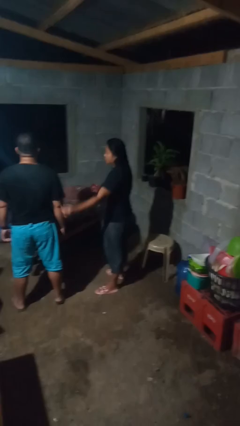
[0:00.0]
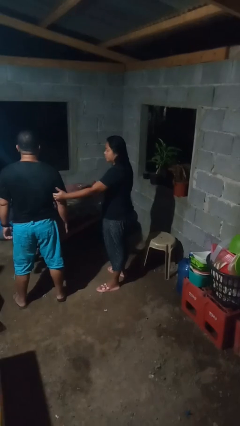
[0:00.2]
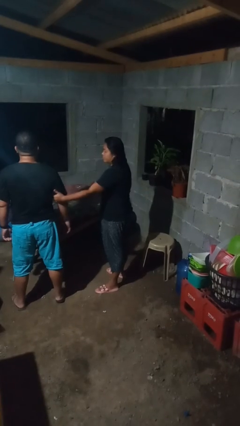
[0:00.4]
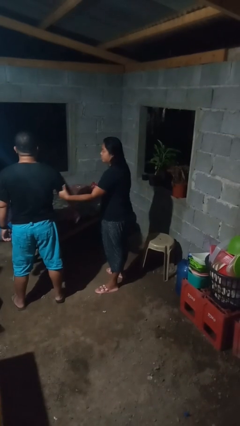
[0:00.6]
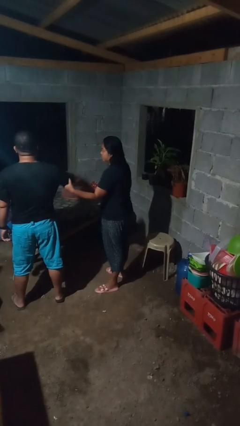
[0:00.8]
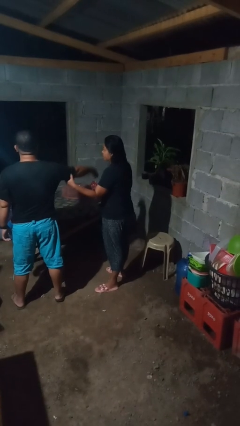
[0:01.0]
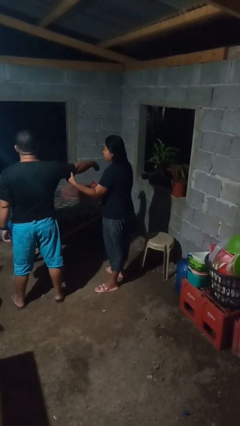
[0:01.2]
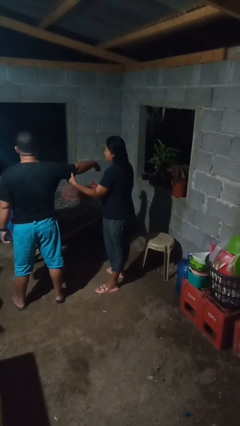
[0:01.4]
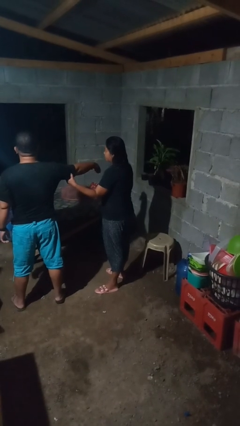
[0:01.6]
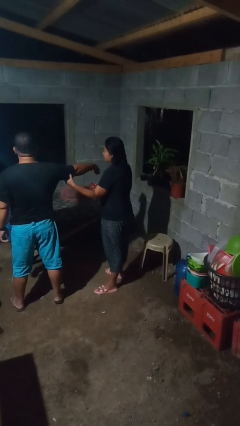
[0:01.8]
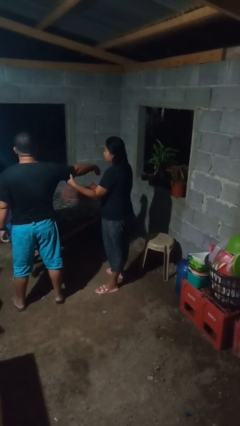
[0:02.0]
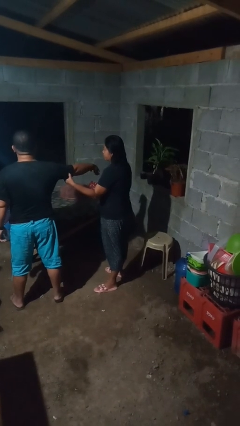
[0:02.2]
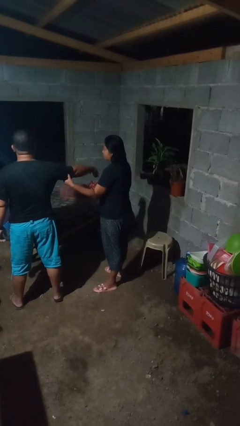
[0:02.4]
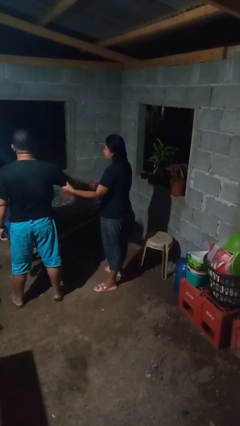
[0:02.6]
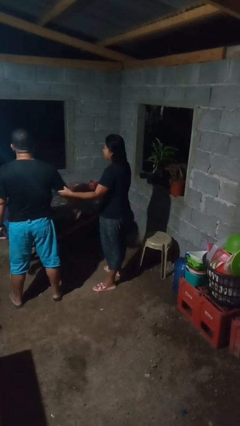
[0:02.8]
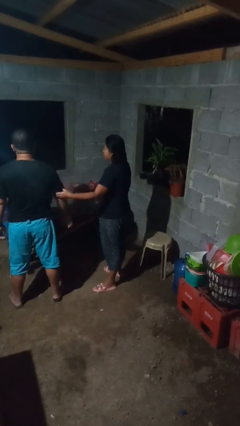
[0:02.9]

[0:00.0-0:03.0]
person grabs person by bicep

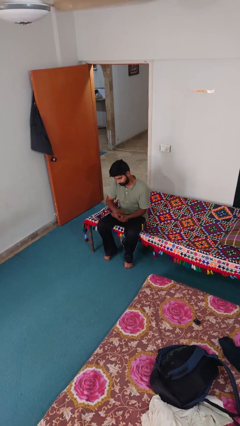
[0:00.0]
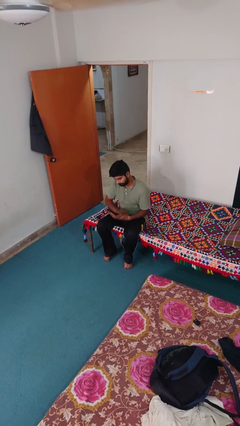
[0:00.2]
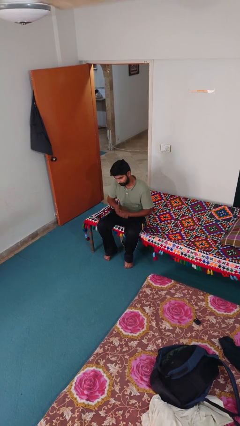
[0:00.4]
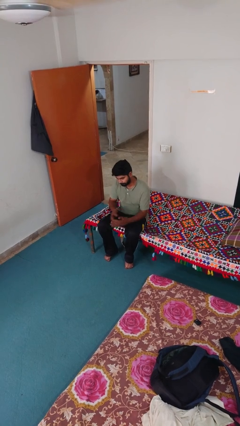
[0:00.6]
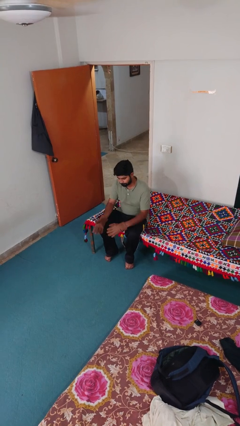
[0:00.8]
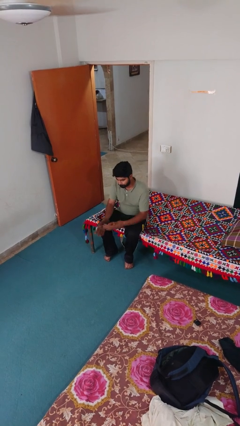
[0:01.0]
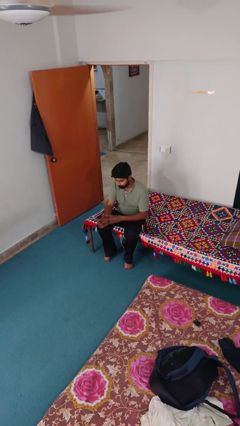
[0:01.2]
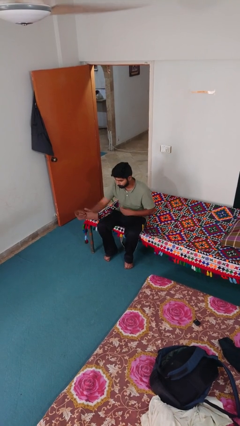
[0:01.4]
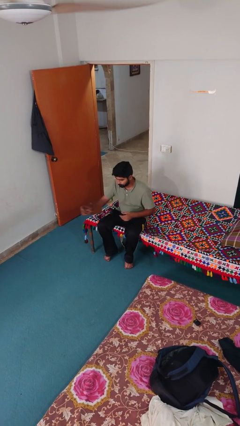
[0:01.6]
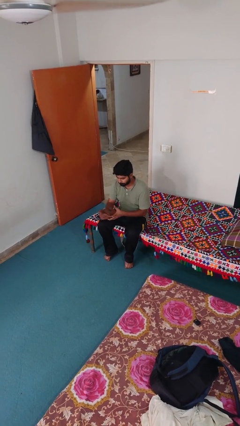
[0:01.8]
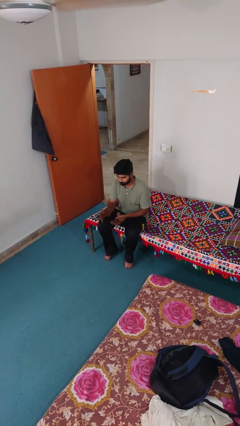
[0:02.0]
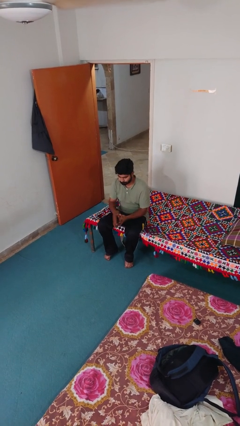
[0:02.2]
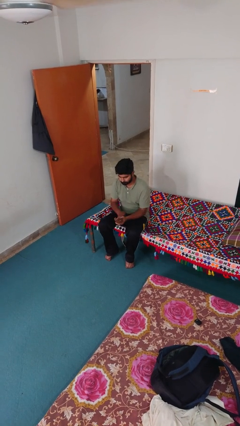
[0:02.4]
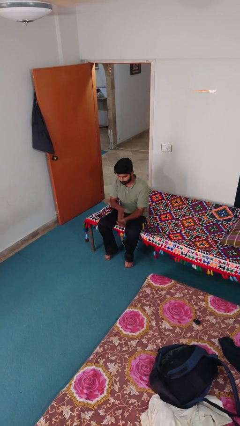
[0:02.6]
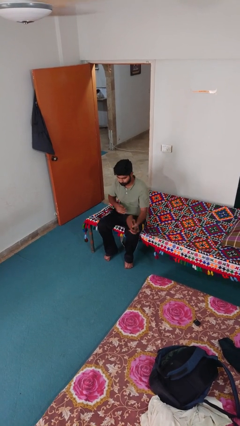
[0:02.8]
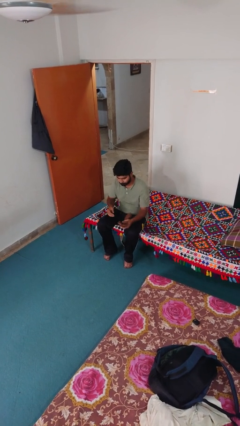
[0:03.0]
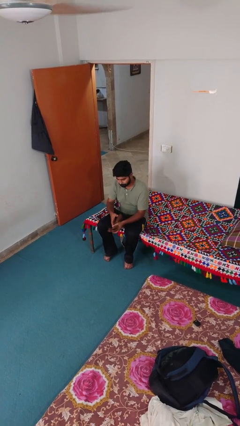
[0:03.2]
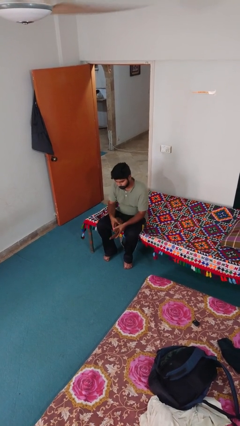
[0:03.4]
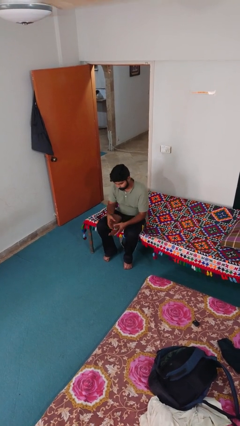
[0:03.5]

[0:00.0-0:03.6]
person takes off gloves

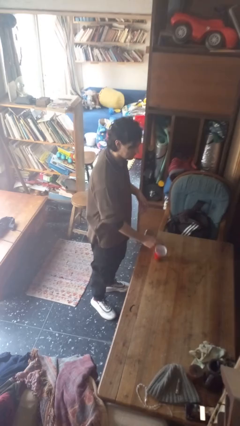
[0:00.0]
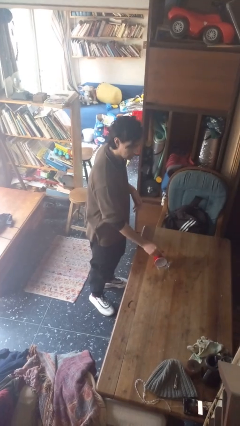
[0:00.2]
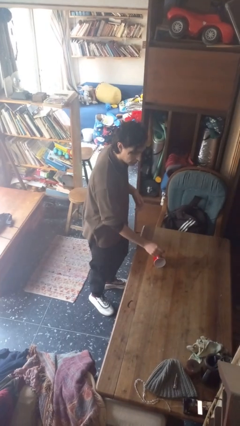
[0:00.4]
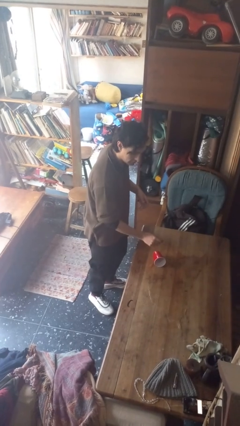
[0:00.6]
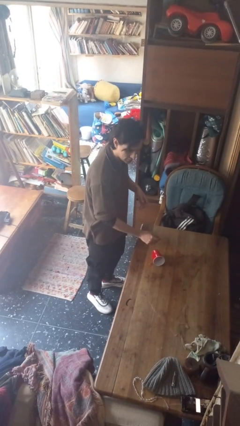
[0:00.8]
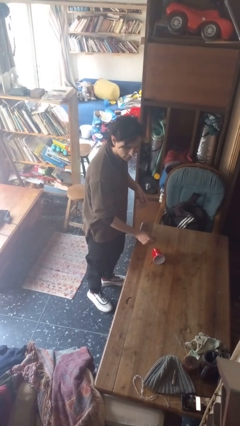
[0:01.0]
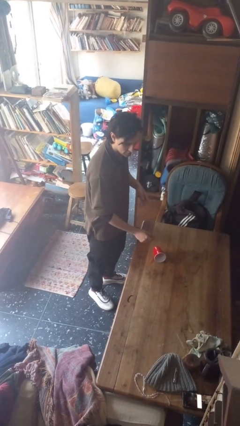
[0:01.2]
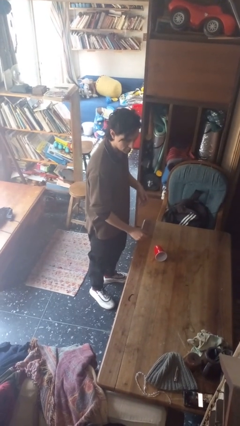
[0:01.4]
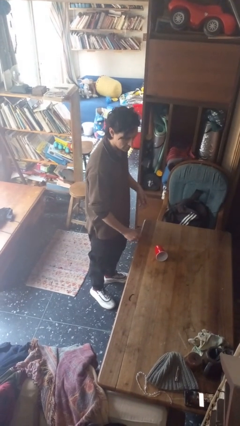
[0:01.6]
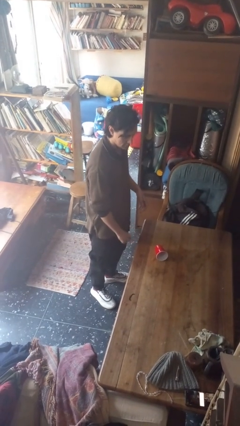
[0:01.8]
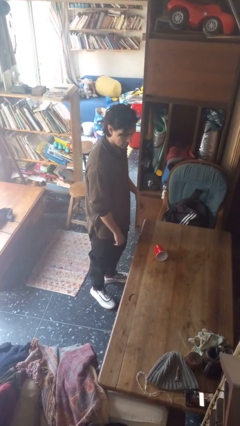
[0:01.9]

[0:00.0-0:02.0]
person spills on table

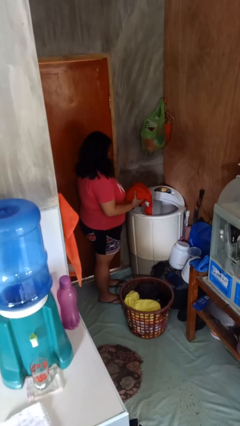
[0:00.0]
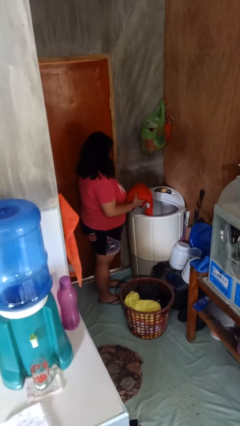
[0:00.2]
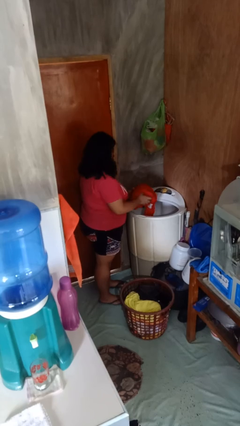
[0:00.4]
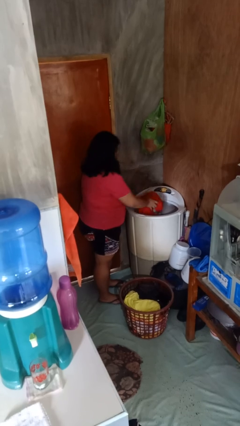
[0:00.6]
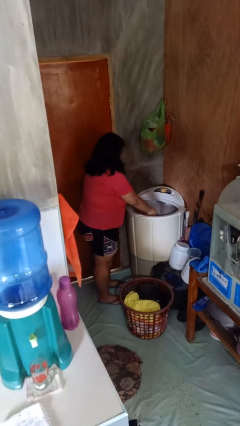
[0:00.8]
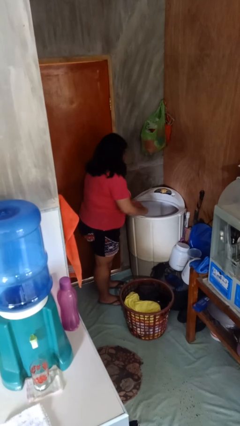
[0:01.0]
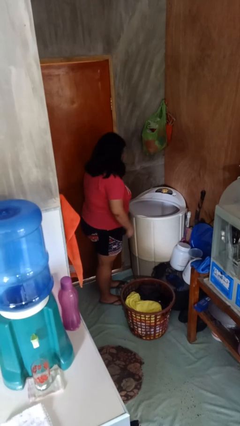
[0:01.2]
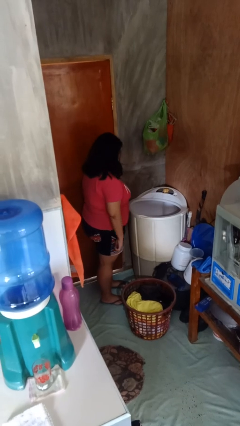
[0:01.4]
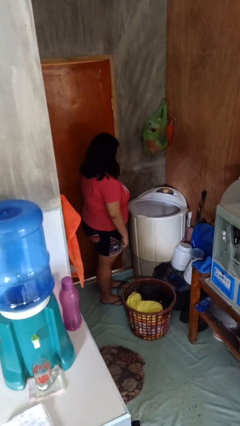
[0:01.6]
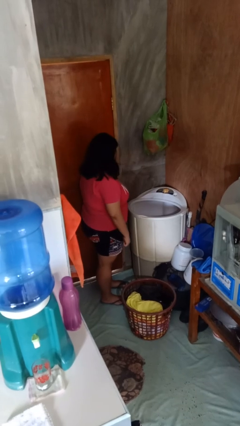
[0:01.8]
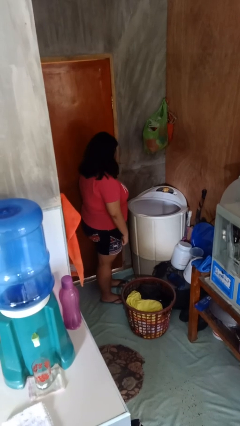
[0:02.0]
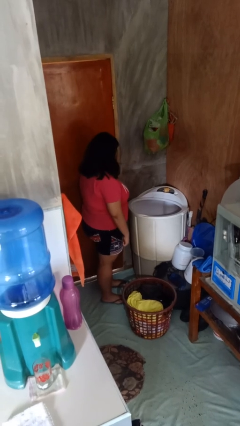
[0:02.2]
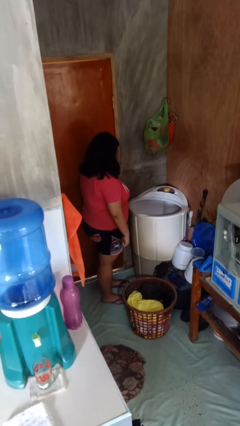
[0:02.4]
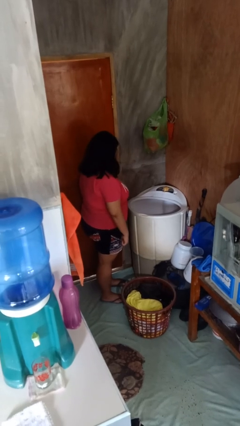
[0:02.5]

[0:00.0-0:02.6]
person loads dryer

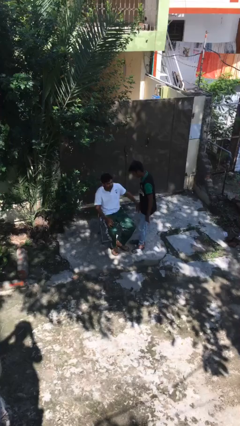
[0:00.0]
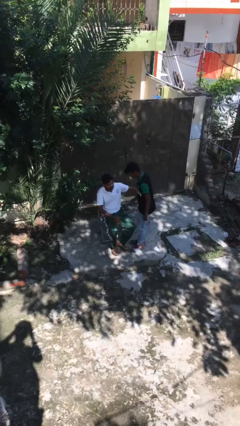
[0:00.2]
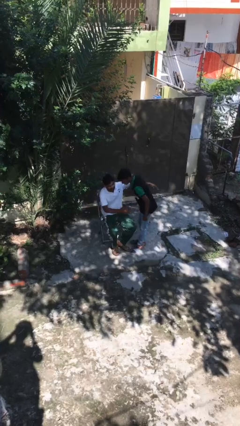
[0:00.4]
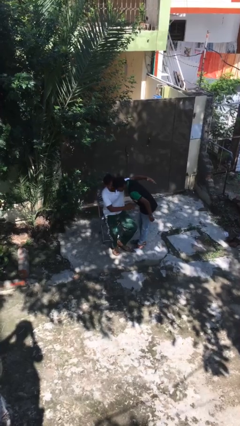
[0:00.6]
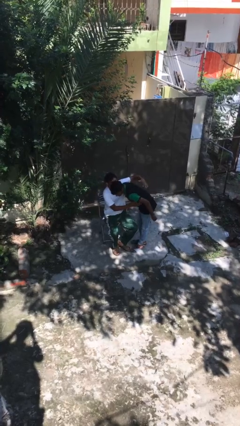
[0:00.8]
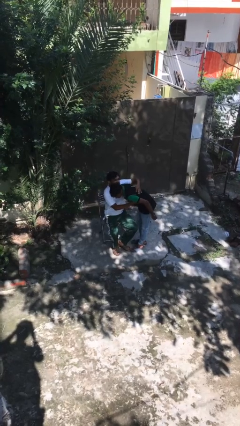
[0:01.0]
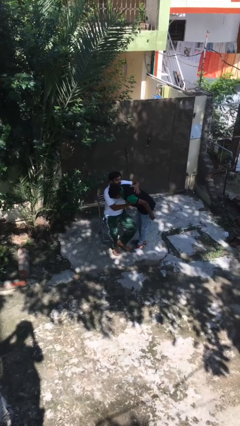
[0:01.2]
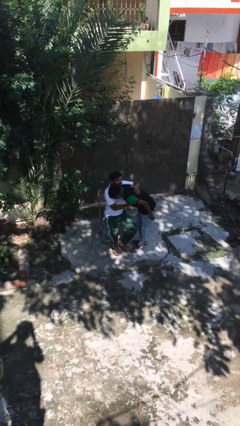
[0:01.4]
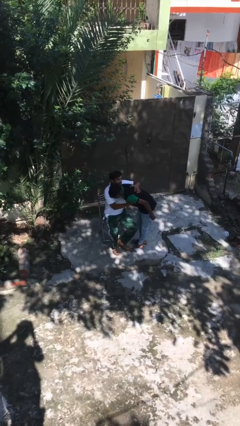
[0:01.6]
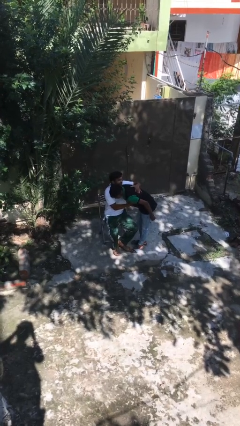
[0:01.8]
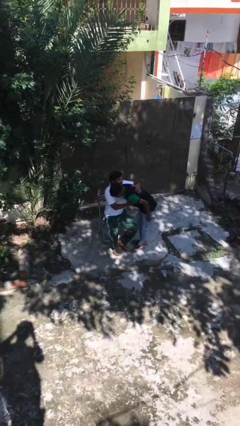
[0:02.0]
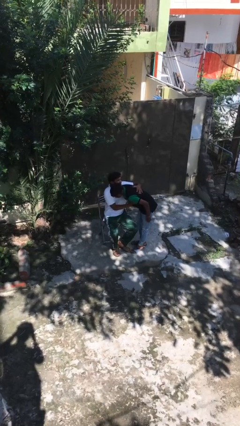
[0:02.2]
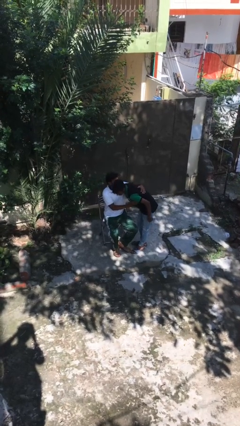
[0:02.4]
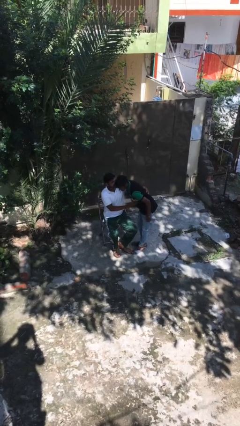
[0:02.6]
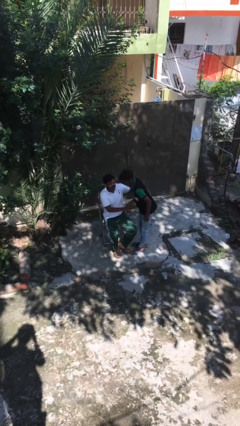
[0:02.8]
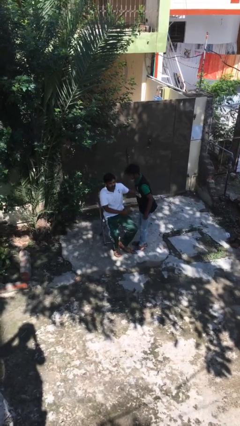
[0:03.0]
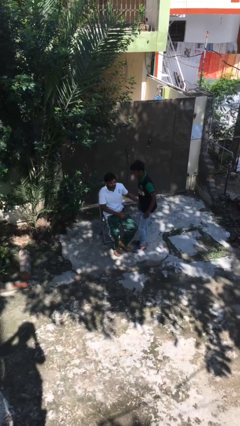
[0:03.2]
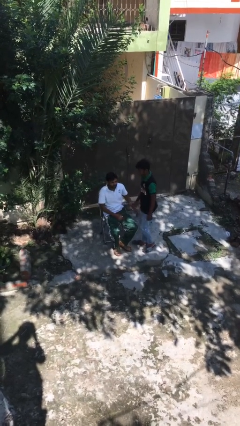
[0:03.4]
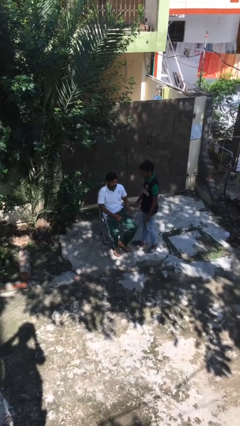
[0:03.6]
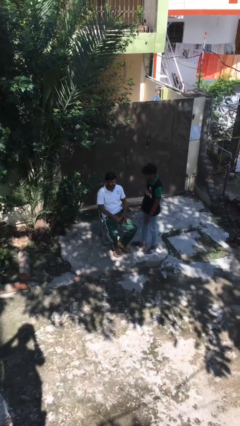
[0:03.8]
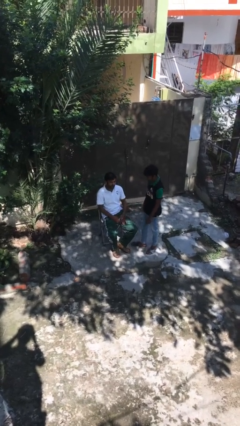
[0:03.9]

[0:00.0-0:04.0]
person embraces person

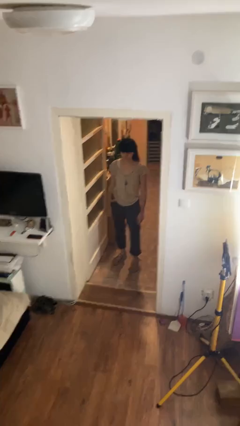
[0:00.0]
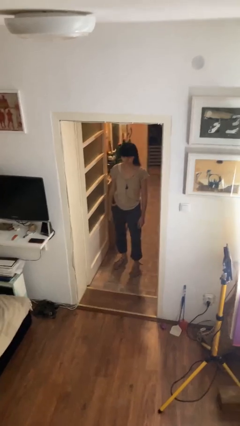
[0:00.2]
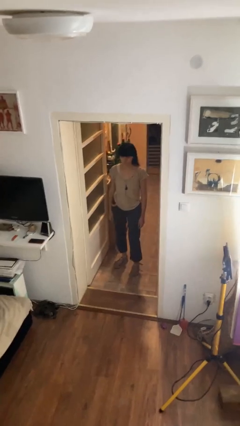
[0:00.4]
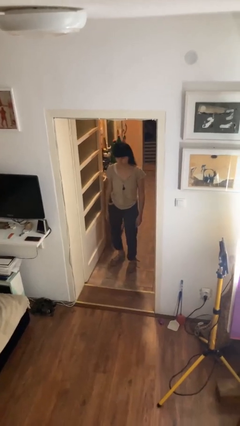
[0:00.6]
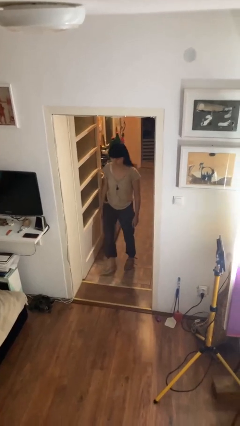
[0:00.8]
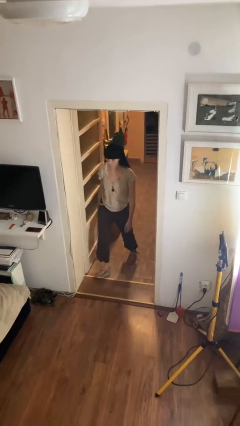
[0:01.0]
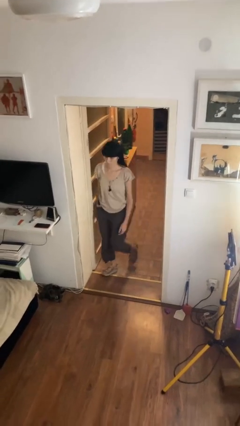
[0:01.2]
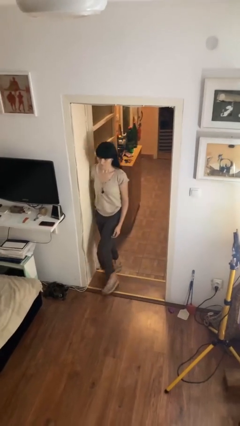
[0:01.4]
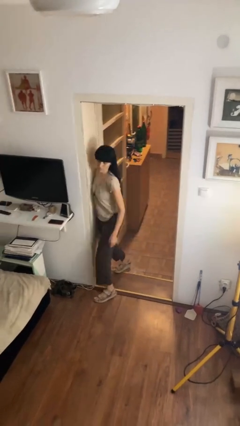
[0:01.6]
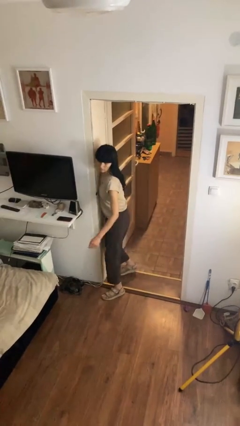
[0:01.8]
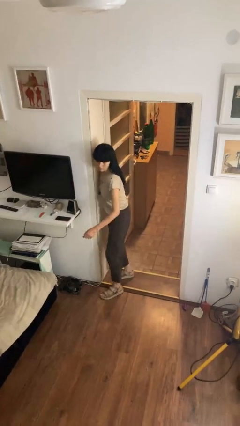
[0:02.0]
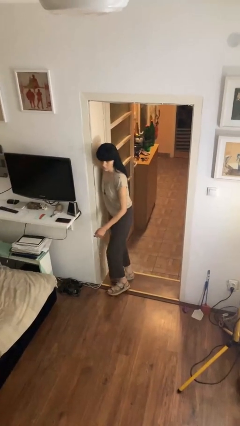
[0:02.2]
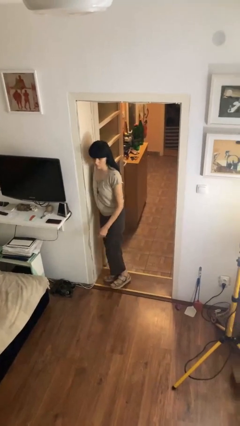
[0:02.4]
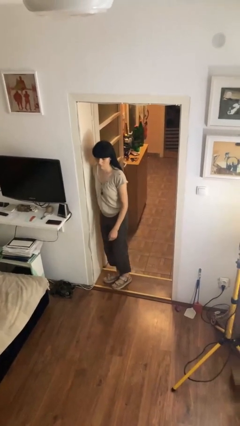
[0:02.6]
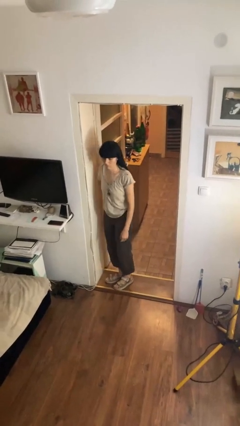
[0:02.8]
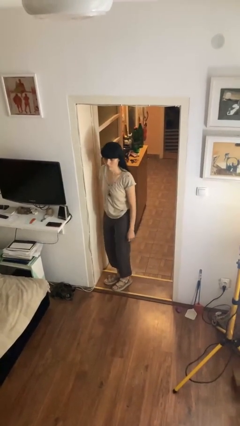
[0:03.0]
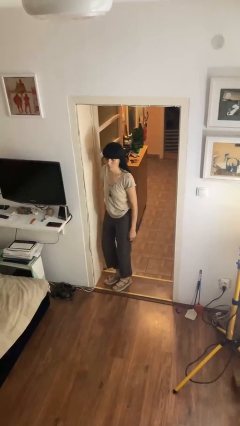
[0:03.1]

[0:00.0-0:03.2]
person bumps into wall
